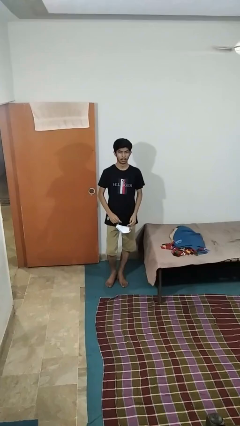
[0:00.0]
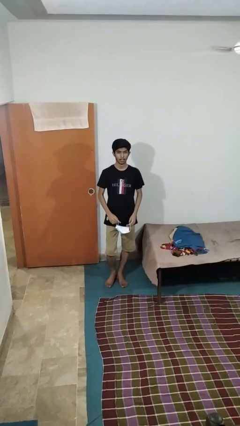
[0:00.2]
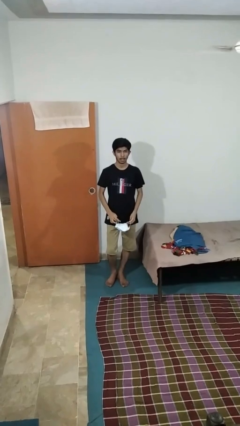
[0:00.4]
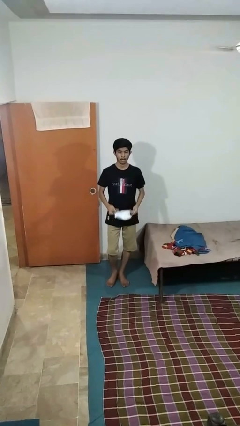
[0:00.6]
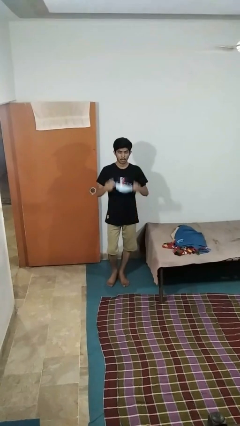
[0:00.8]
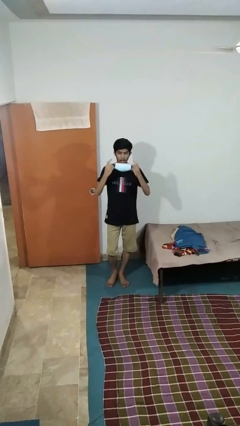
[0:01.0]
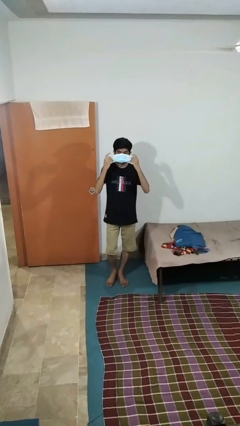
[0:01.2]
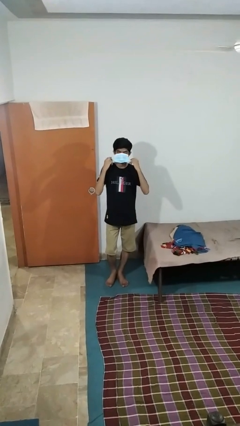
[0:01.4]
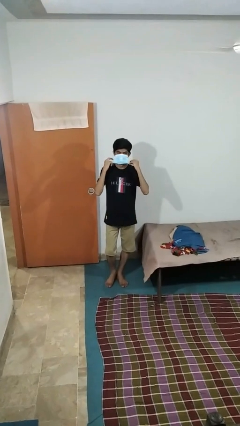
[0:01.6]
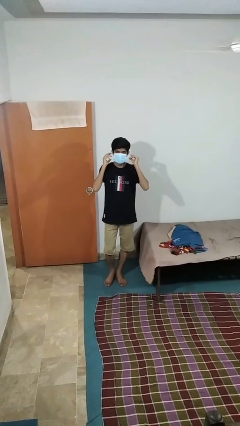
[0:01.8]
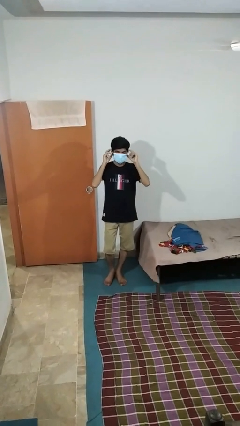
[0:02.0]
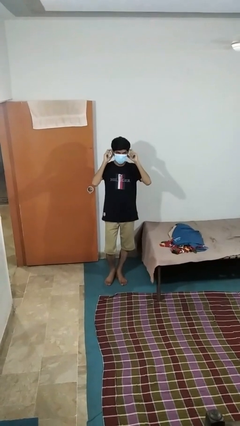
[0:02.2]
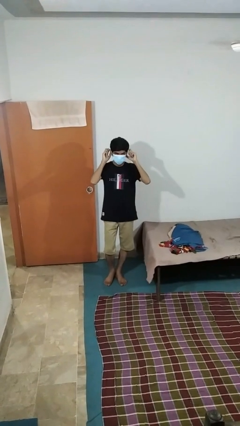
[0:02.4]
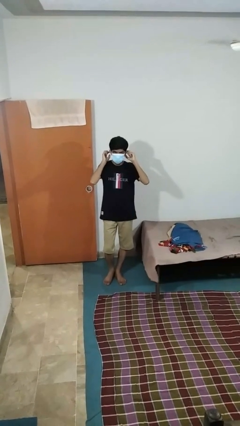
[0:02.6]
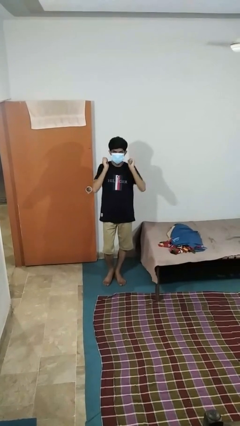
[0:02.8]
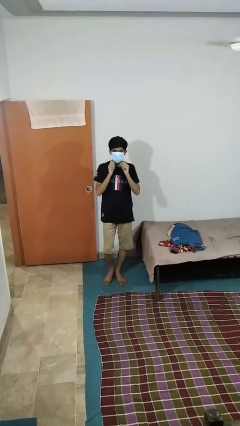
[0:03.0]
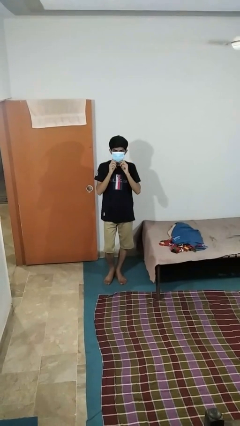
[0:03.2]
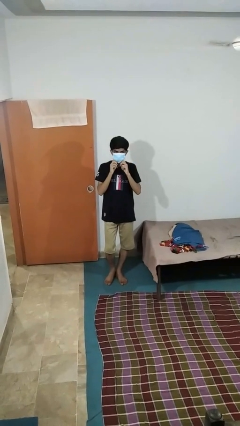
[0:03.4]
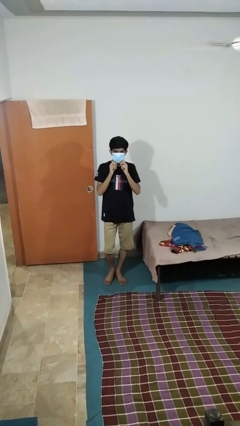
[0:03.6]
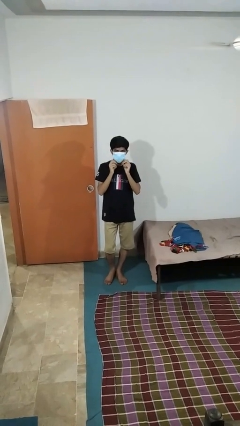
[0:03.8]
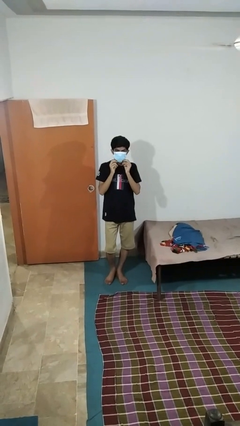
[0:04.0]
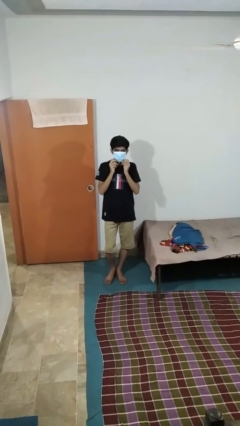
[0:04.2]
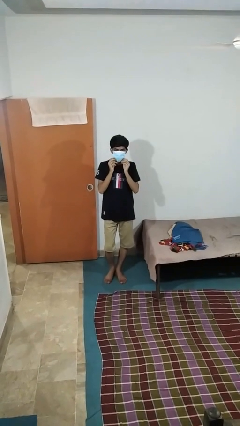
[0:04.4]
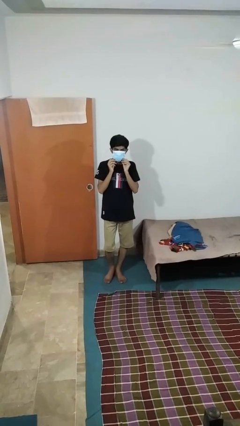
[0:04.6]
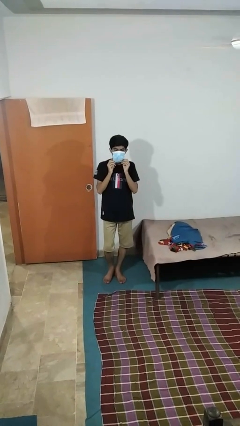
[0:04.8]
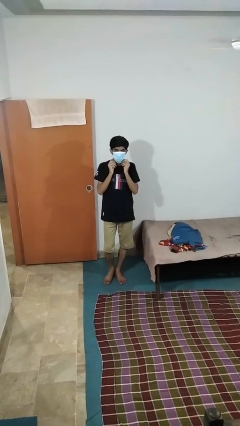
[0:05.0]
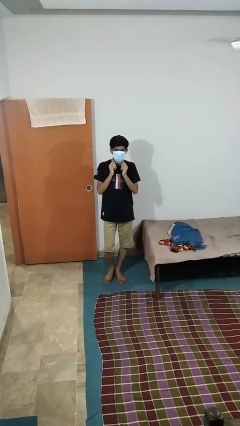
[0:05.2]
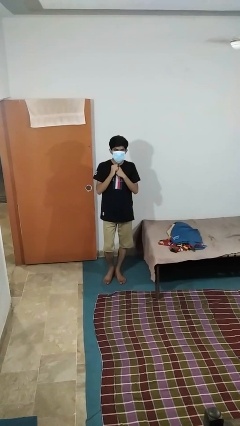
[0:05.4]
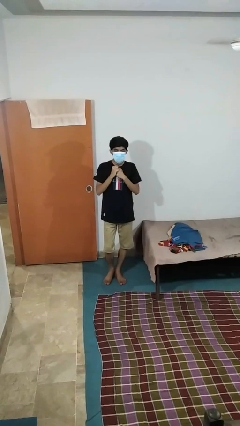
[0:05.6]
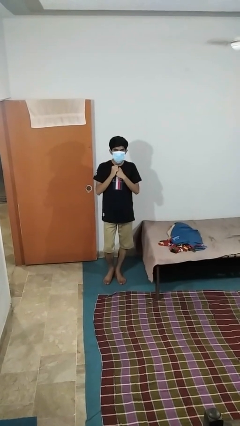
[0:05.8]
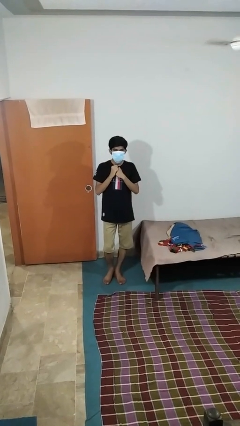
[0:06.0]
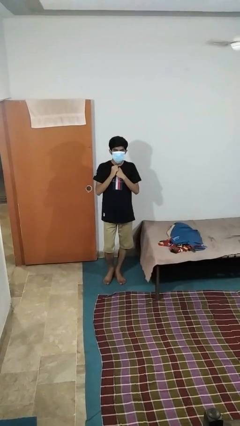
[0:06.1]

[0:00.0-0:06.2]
person puts on facemask

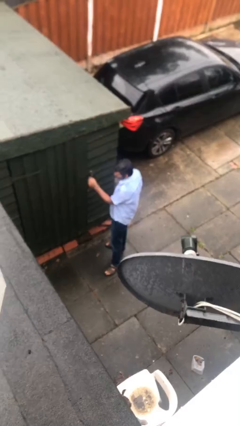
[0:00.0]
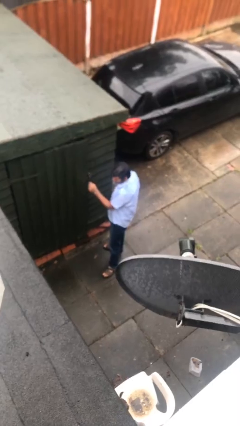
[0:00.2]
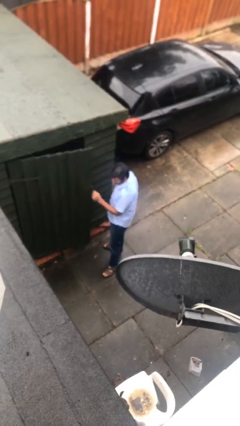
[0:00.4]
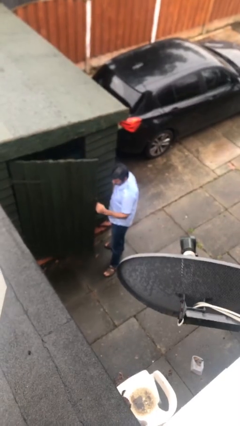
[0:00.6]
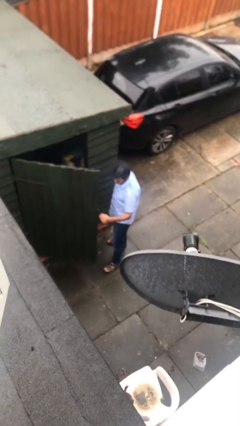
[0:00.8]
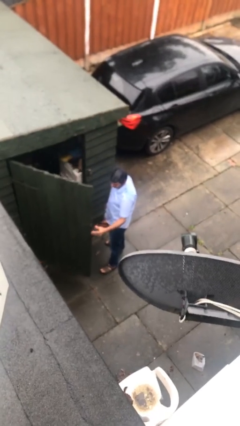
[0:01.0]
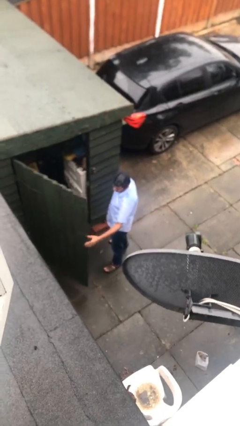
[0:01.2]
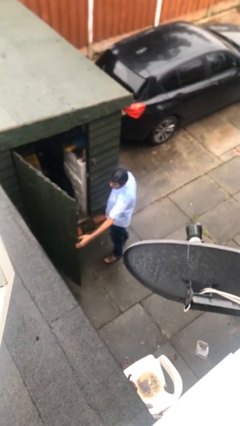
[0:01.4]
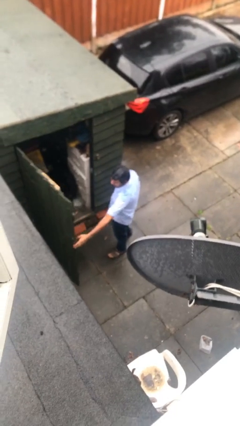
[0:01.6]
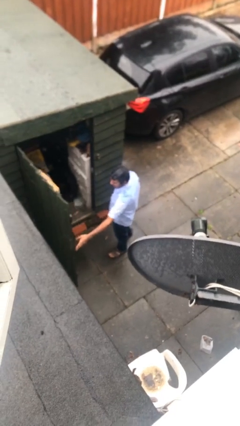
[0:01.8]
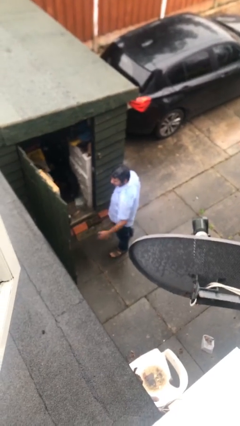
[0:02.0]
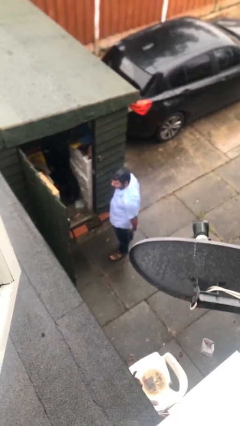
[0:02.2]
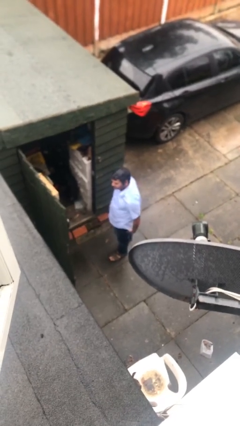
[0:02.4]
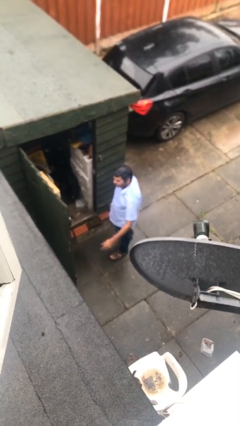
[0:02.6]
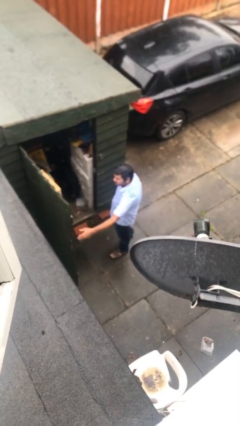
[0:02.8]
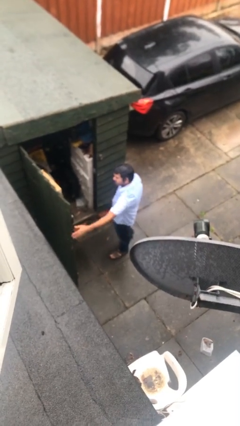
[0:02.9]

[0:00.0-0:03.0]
person opens facility door

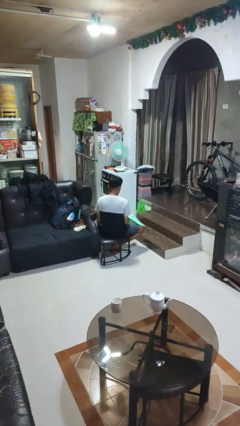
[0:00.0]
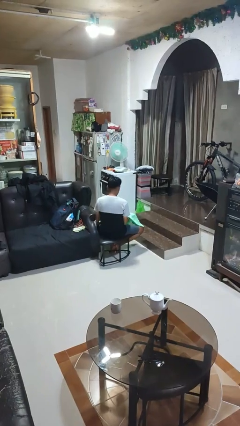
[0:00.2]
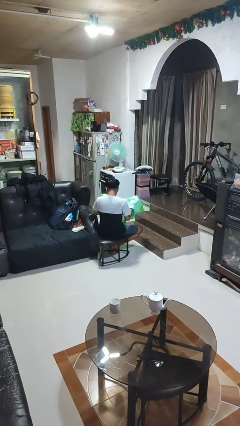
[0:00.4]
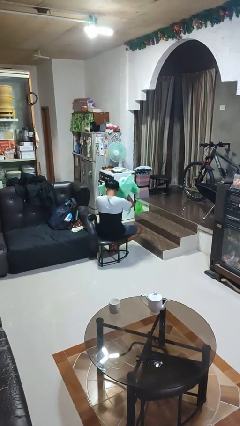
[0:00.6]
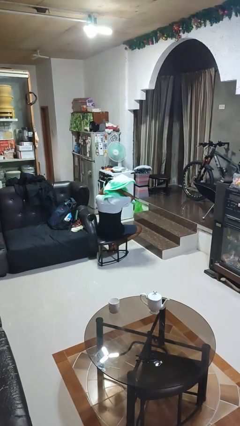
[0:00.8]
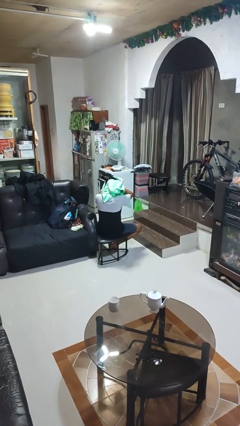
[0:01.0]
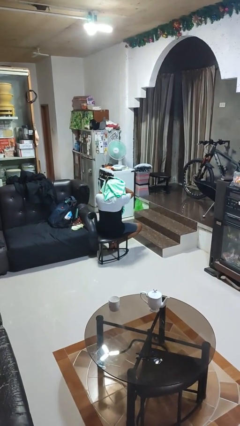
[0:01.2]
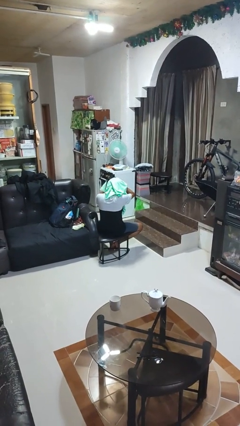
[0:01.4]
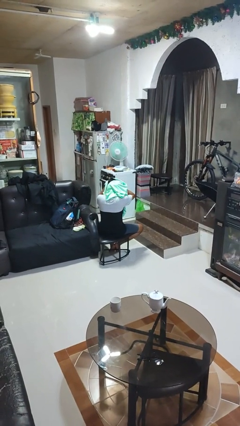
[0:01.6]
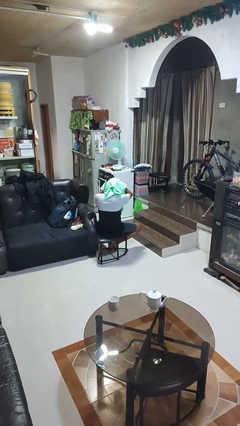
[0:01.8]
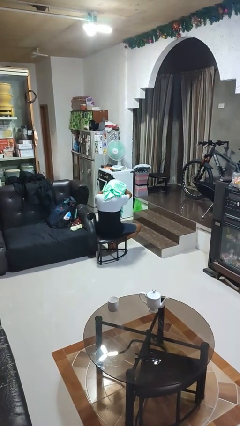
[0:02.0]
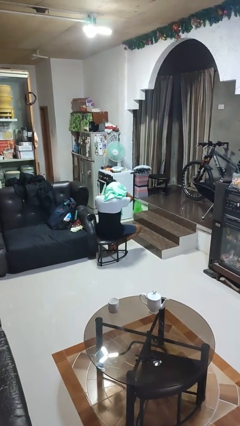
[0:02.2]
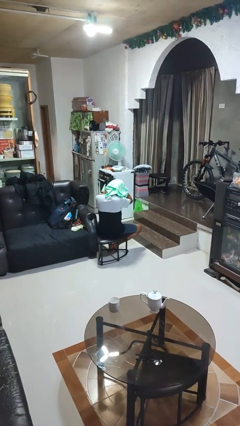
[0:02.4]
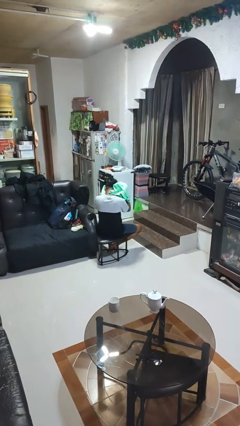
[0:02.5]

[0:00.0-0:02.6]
person dries hair with hairdryer

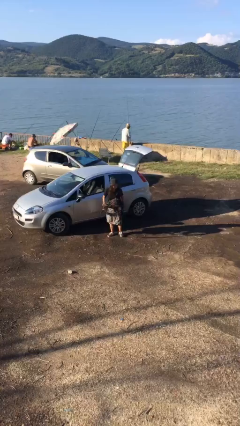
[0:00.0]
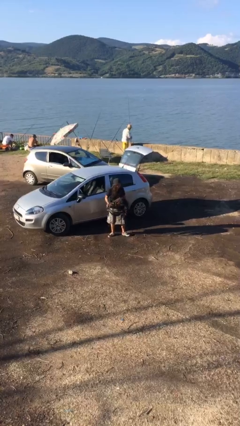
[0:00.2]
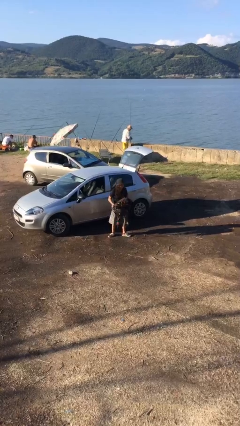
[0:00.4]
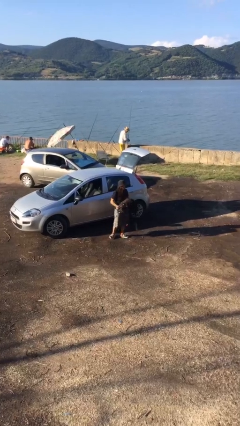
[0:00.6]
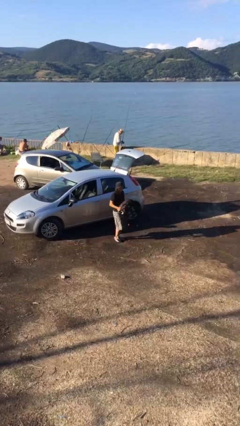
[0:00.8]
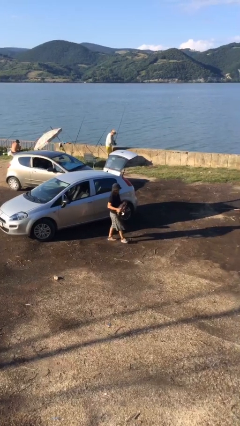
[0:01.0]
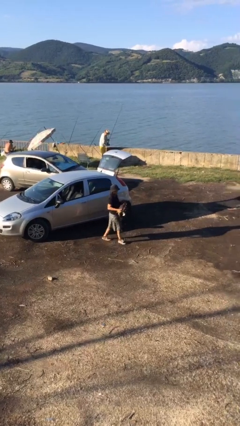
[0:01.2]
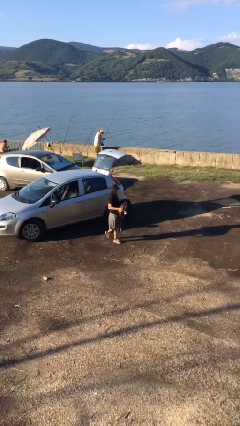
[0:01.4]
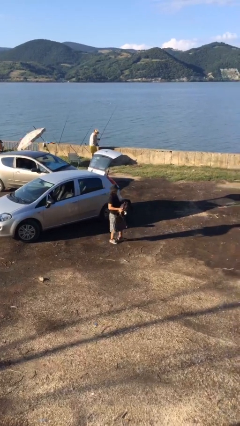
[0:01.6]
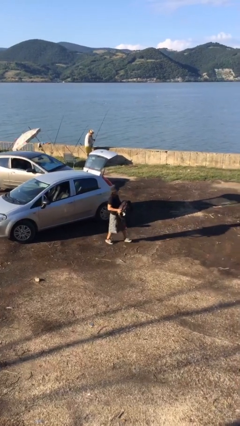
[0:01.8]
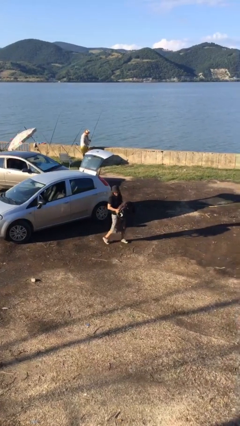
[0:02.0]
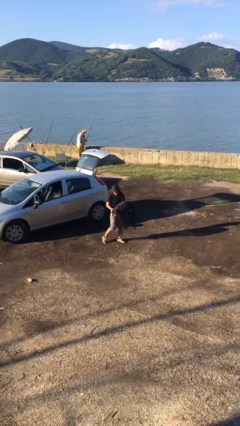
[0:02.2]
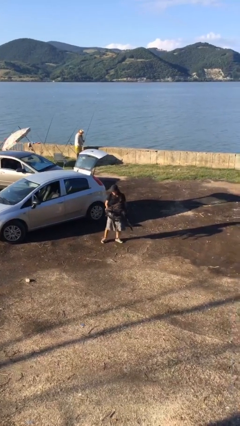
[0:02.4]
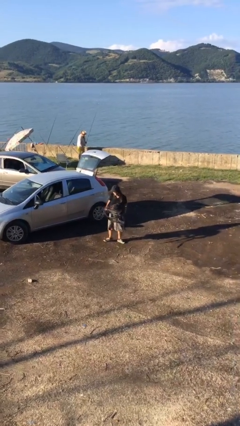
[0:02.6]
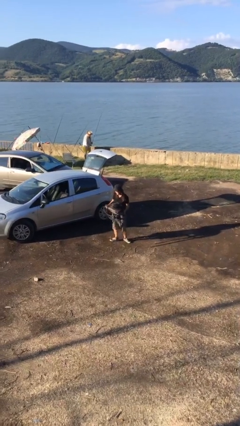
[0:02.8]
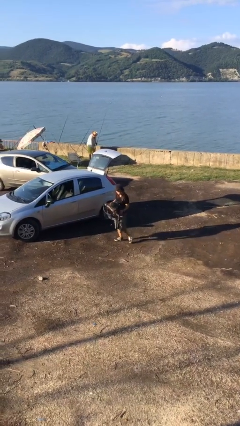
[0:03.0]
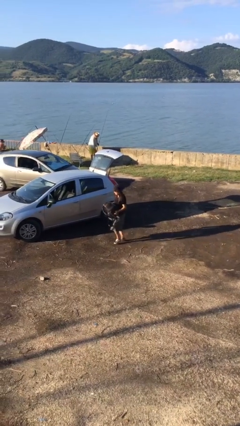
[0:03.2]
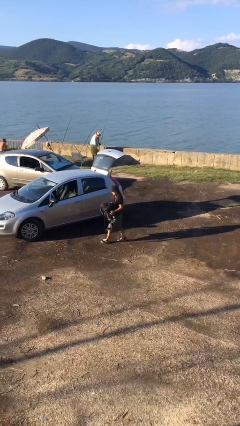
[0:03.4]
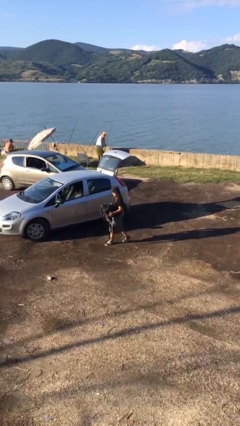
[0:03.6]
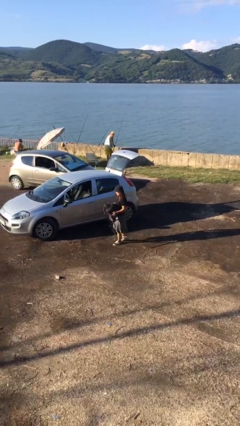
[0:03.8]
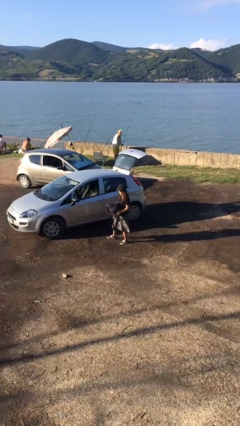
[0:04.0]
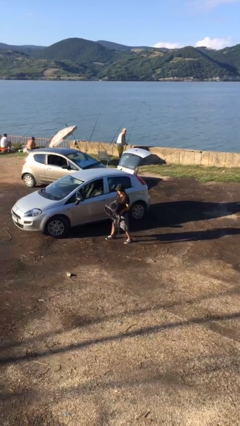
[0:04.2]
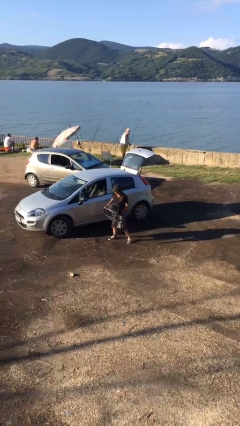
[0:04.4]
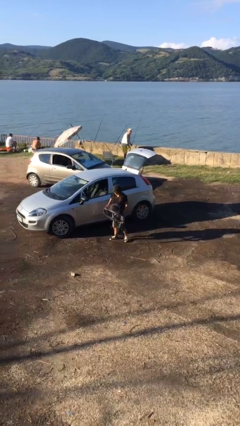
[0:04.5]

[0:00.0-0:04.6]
person carries heavy object

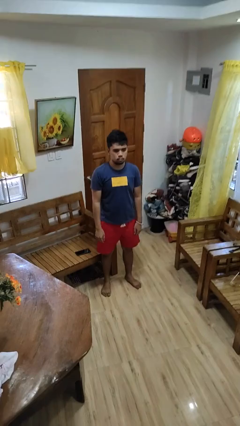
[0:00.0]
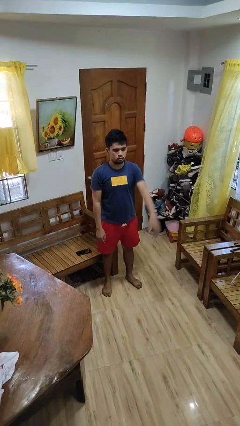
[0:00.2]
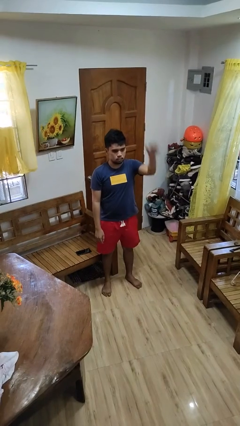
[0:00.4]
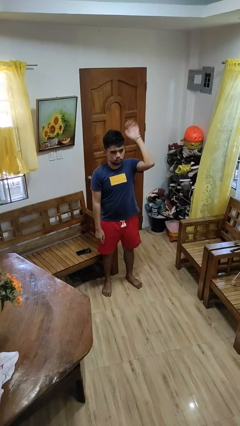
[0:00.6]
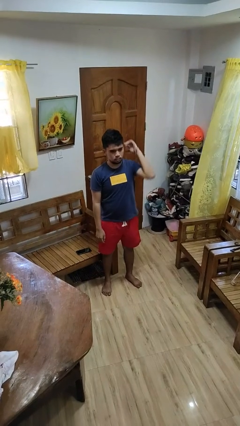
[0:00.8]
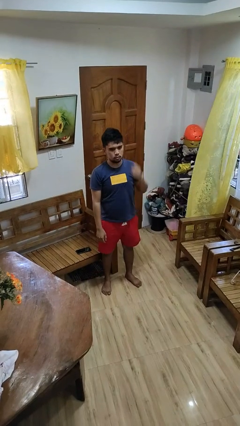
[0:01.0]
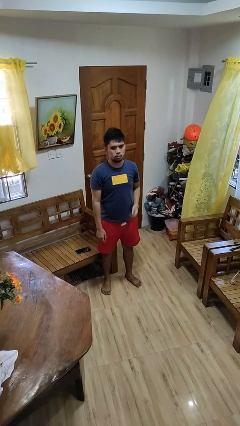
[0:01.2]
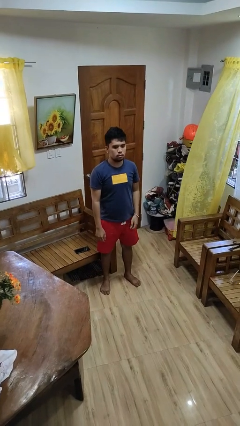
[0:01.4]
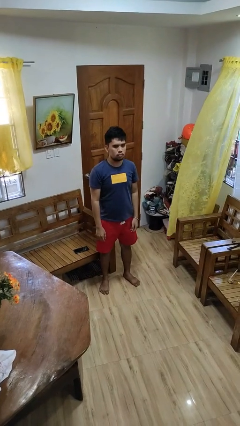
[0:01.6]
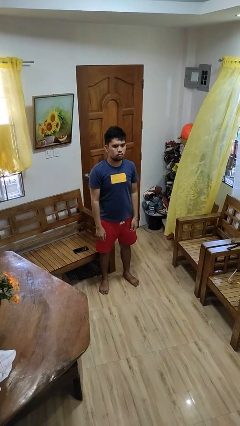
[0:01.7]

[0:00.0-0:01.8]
person gestures swipe up
